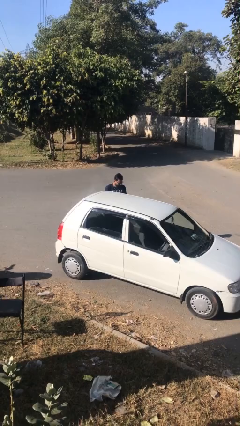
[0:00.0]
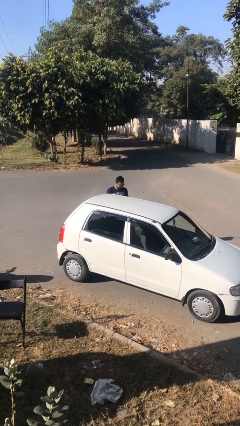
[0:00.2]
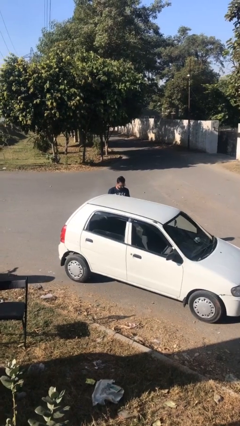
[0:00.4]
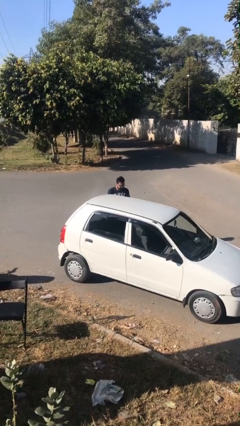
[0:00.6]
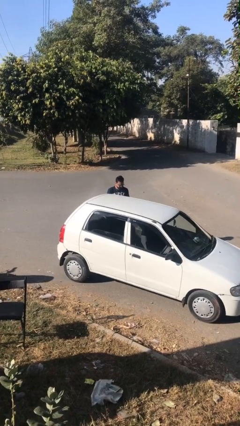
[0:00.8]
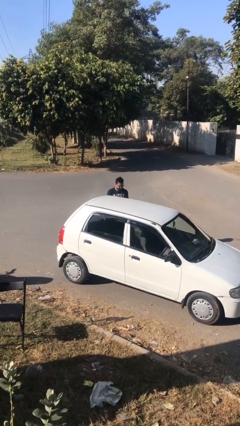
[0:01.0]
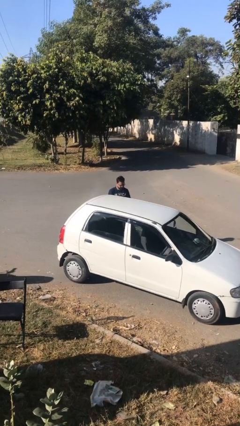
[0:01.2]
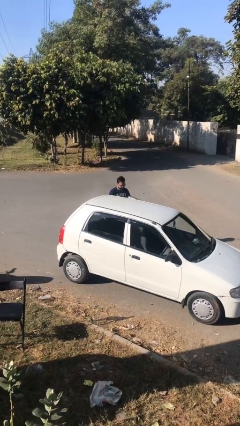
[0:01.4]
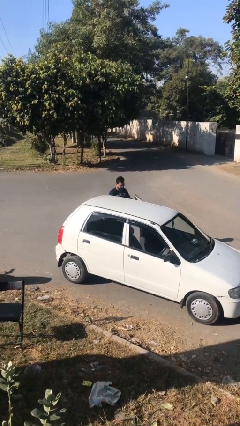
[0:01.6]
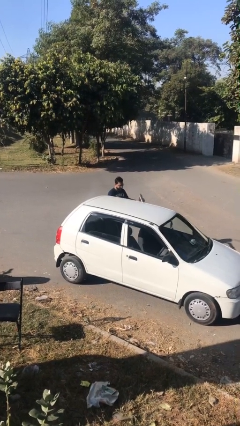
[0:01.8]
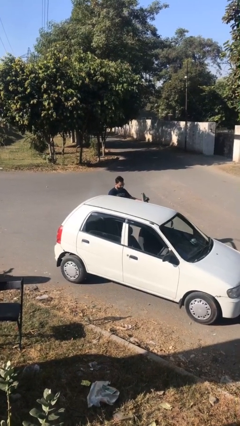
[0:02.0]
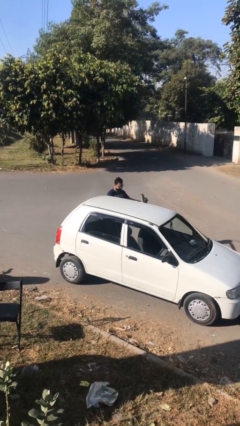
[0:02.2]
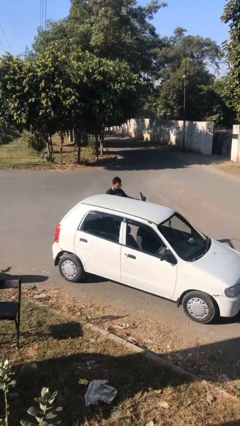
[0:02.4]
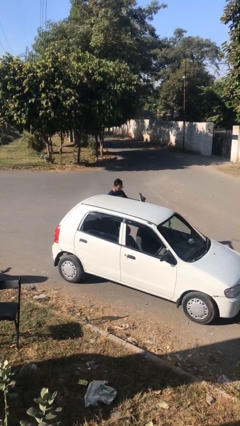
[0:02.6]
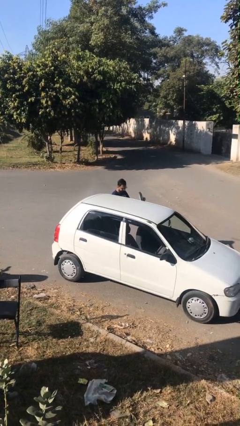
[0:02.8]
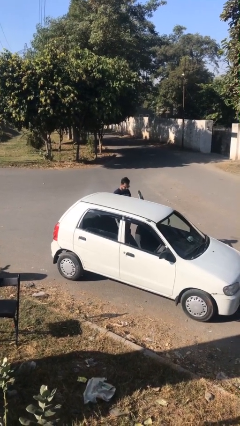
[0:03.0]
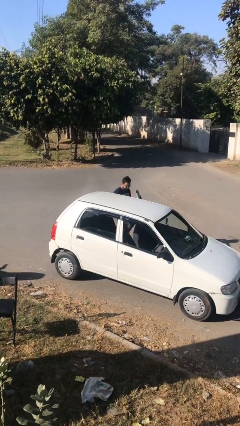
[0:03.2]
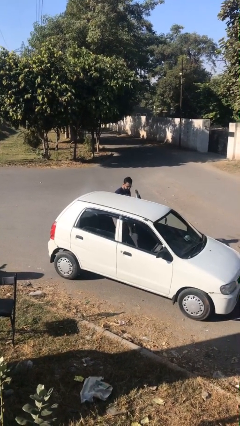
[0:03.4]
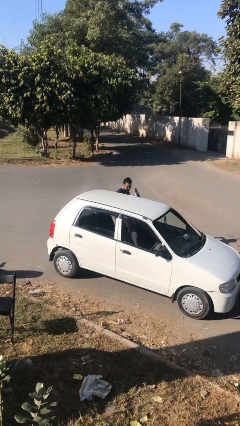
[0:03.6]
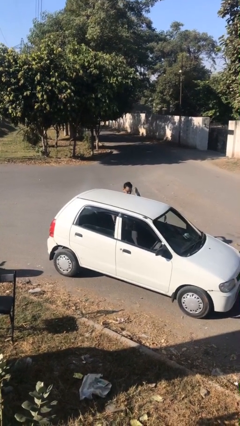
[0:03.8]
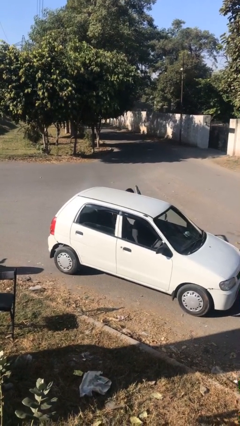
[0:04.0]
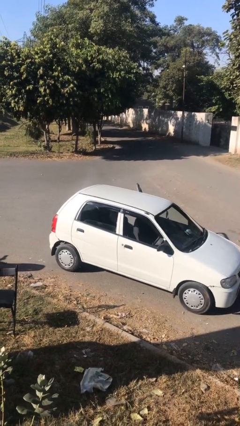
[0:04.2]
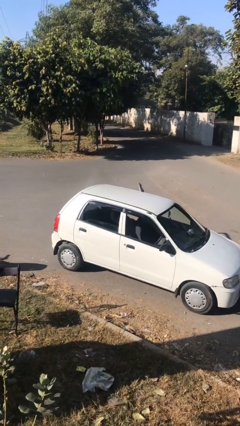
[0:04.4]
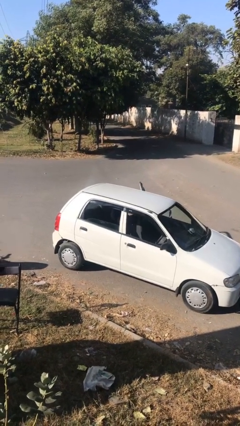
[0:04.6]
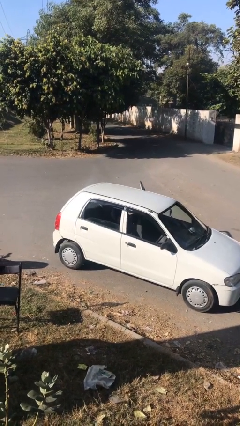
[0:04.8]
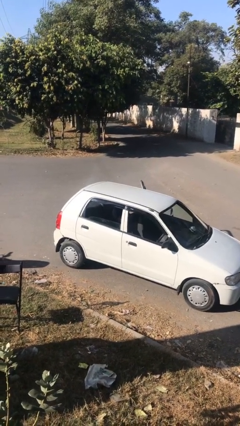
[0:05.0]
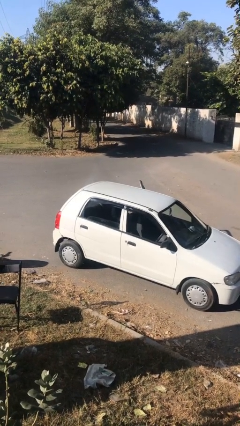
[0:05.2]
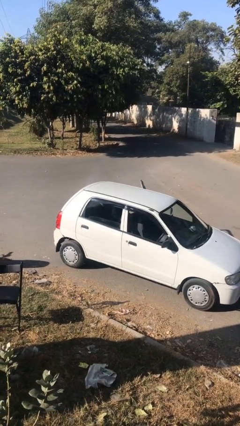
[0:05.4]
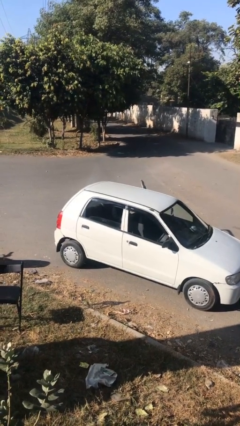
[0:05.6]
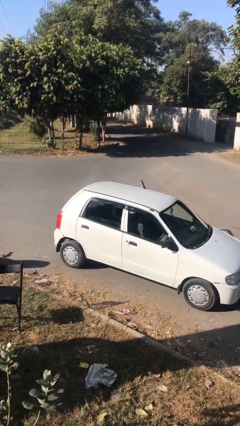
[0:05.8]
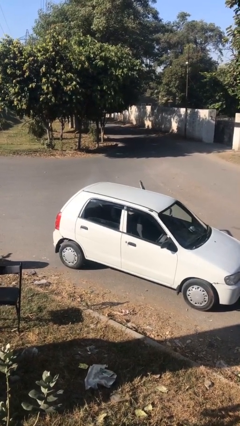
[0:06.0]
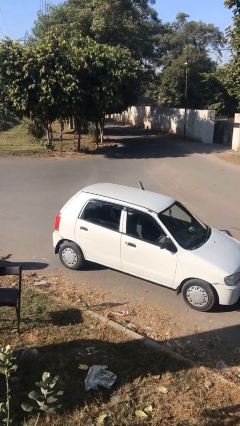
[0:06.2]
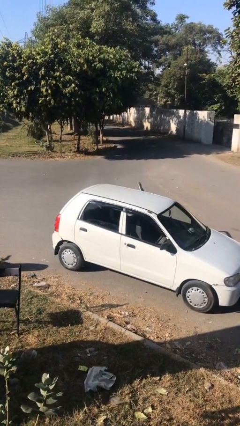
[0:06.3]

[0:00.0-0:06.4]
person enters car

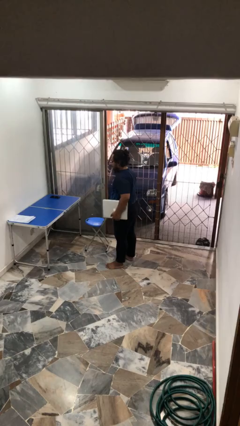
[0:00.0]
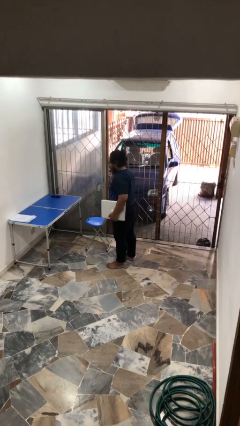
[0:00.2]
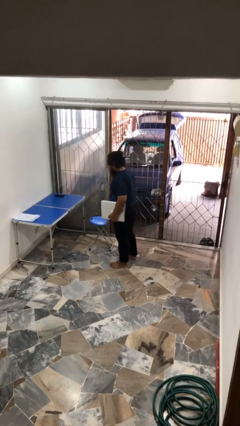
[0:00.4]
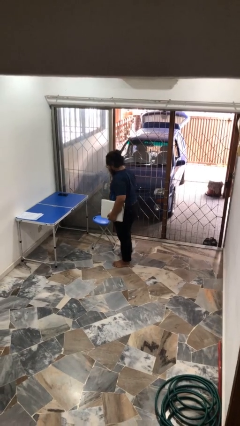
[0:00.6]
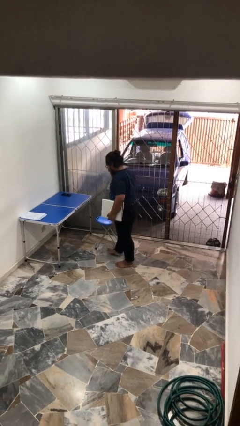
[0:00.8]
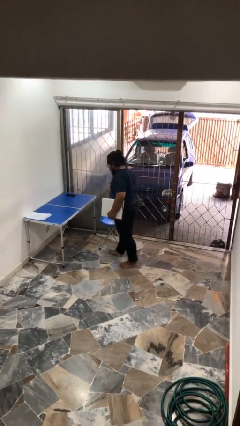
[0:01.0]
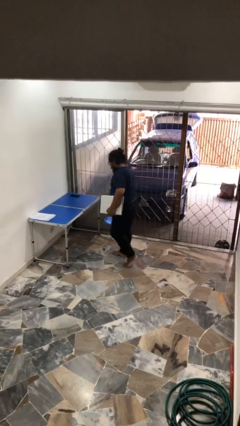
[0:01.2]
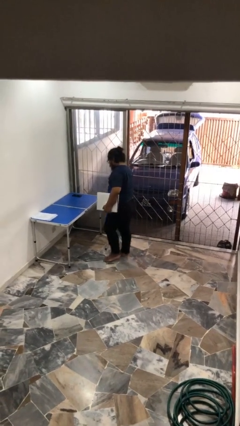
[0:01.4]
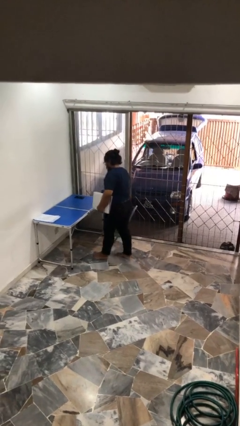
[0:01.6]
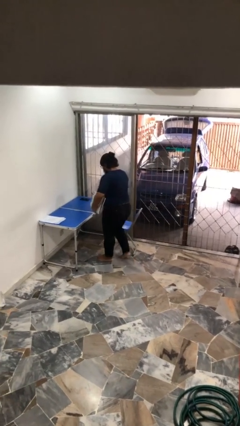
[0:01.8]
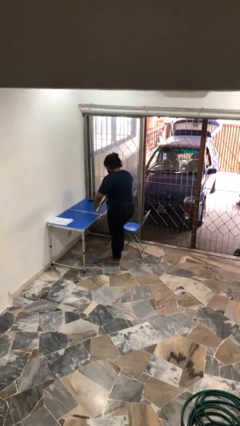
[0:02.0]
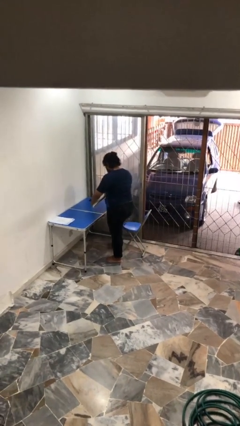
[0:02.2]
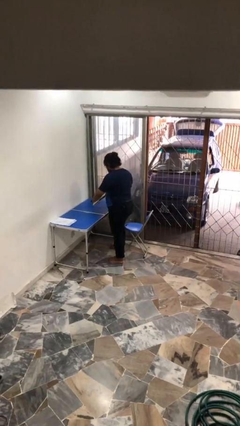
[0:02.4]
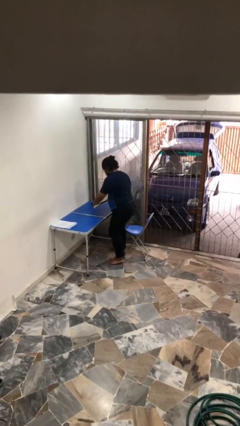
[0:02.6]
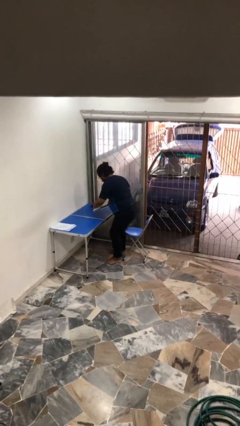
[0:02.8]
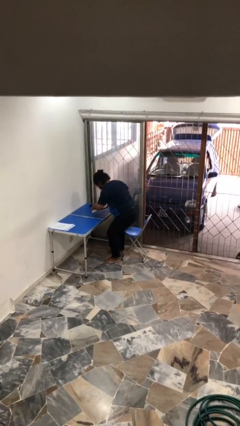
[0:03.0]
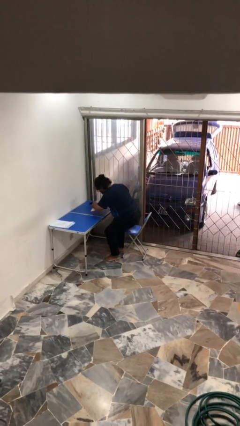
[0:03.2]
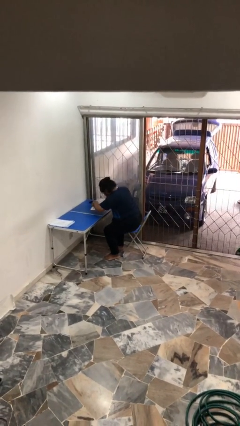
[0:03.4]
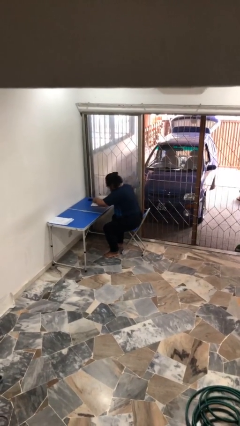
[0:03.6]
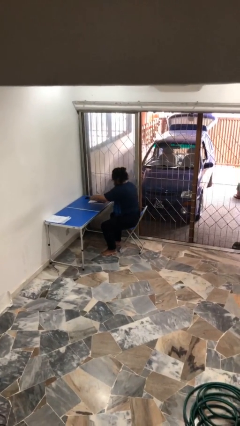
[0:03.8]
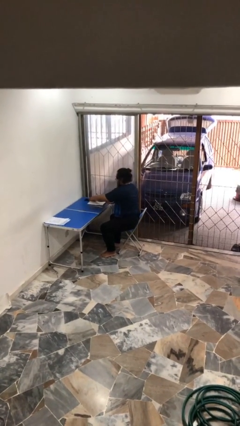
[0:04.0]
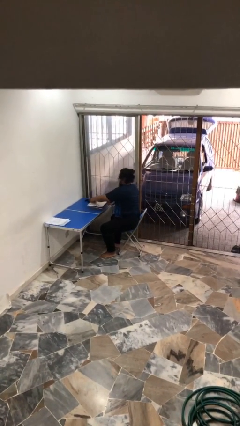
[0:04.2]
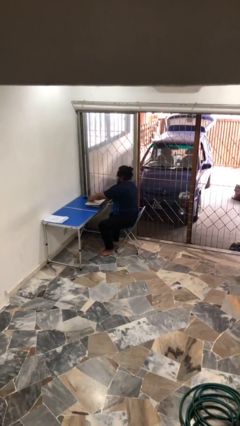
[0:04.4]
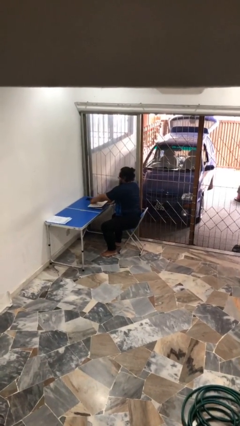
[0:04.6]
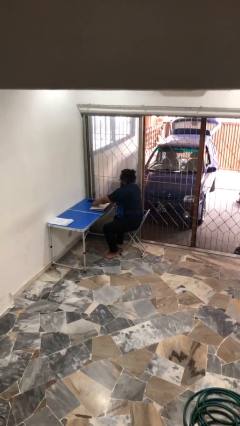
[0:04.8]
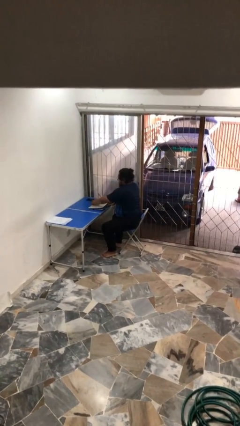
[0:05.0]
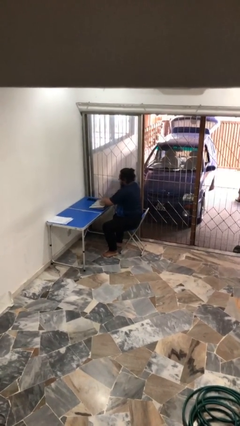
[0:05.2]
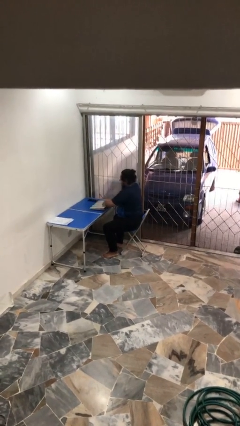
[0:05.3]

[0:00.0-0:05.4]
person sits down

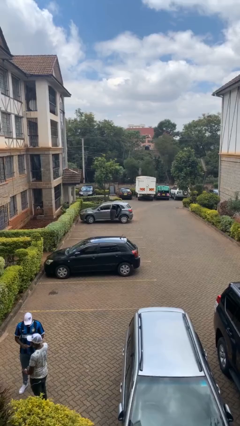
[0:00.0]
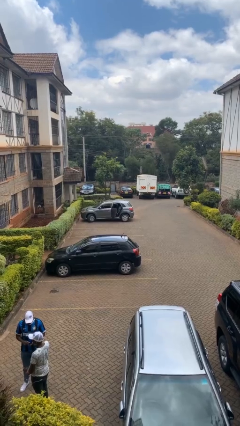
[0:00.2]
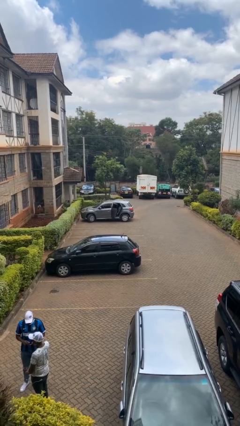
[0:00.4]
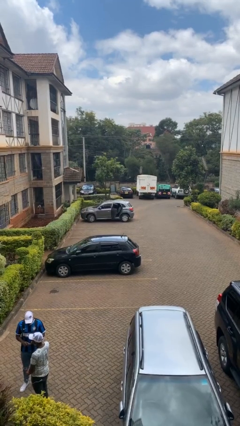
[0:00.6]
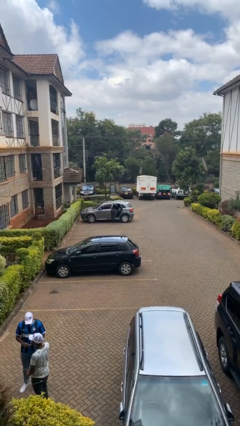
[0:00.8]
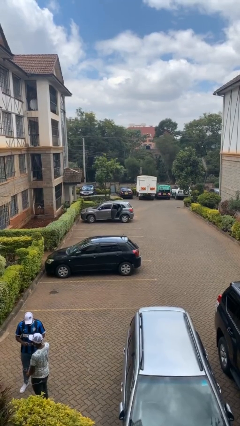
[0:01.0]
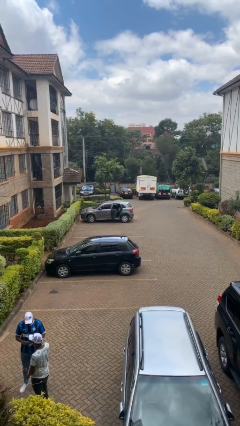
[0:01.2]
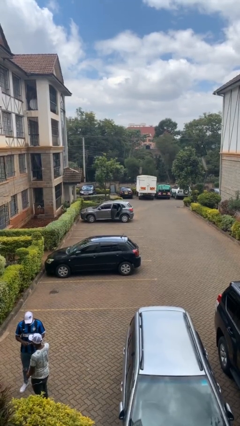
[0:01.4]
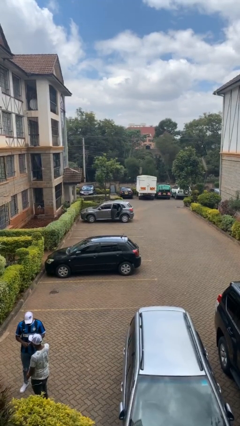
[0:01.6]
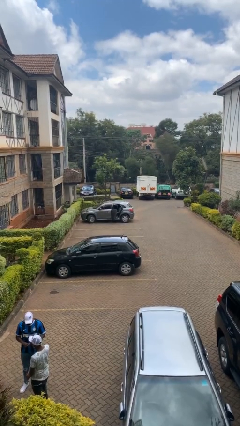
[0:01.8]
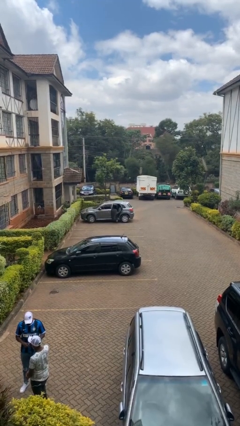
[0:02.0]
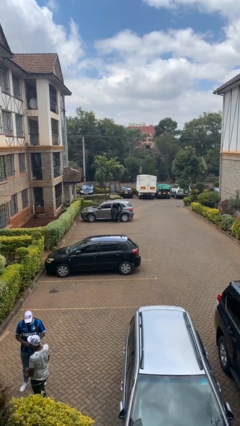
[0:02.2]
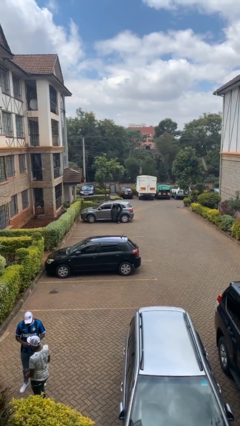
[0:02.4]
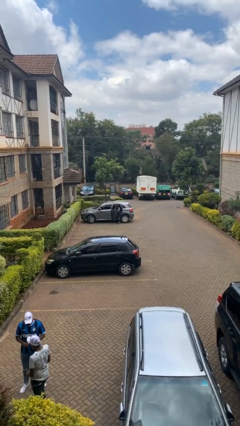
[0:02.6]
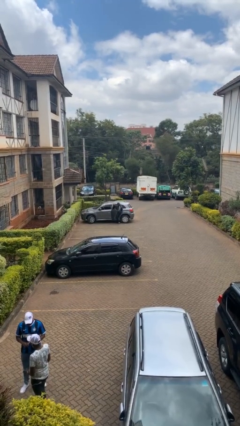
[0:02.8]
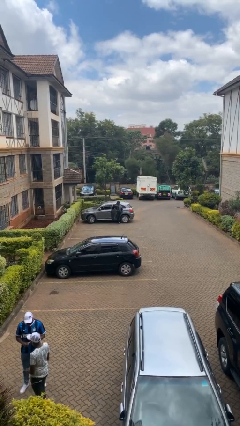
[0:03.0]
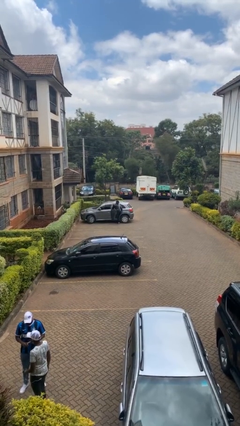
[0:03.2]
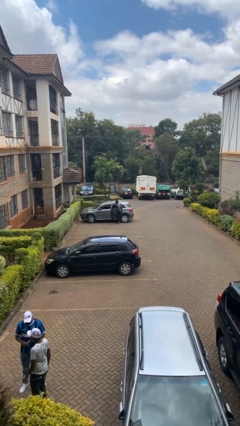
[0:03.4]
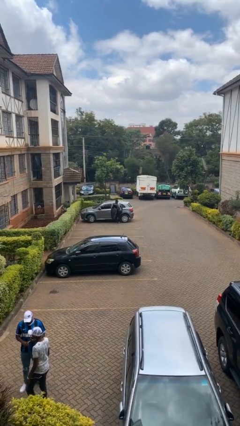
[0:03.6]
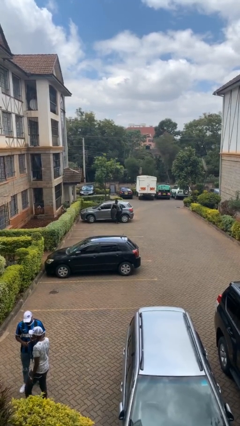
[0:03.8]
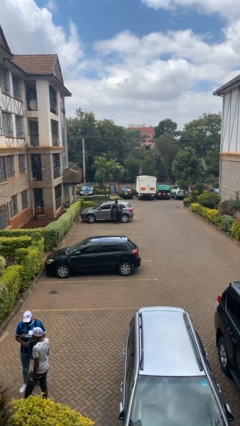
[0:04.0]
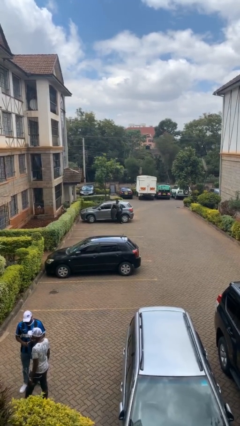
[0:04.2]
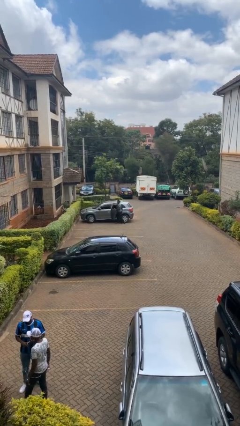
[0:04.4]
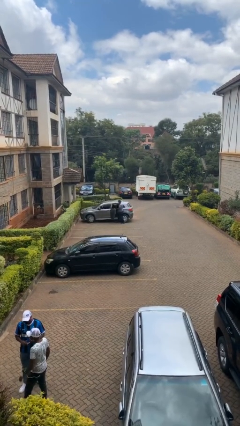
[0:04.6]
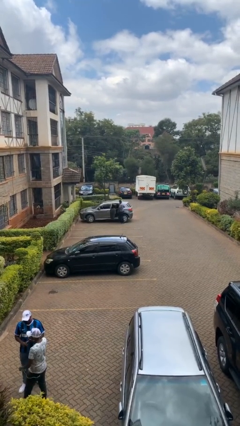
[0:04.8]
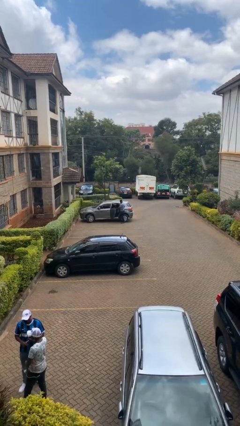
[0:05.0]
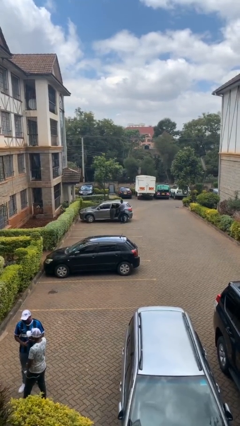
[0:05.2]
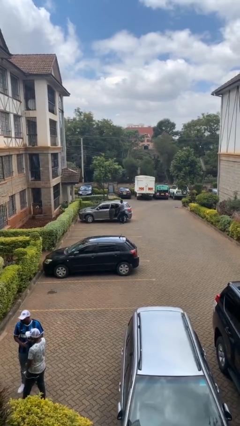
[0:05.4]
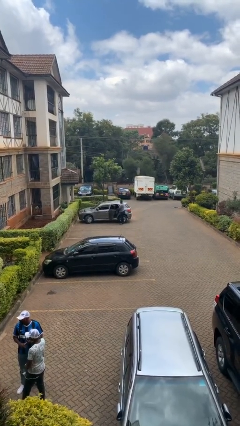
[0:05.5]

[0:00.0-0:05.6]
person exits car

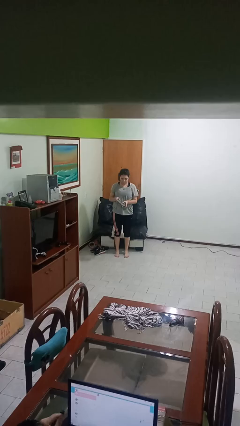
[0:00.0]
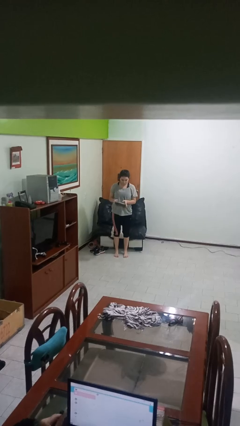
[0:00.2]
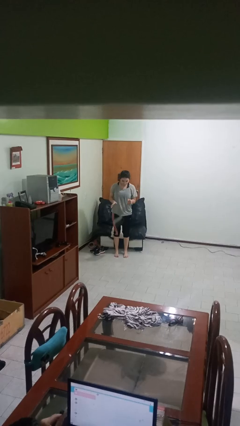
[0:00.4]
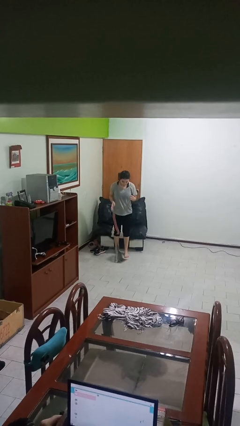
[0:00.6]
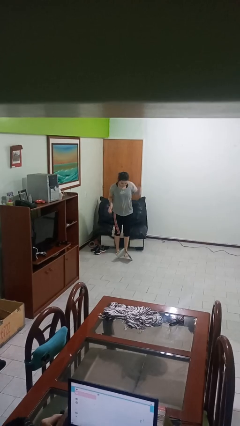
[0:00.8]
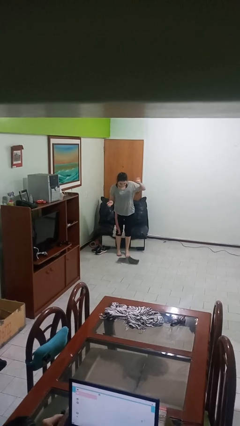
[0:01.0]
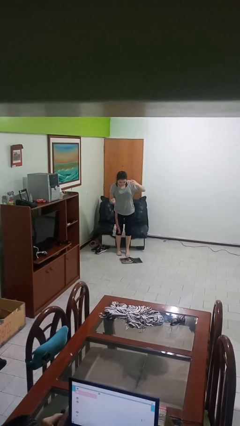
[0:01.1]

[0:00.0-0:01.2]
person drops object
